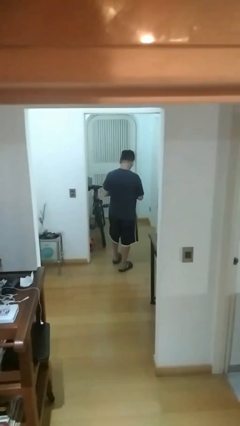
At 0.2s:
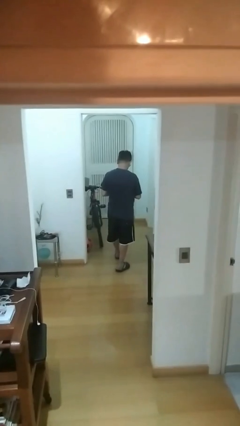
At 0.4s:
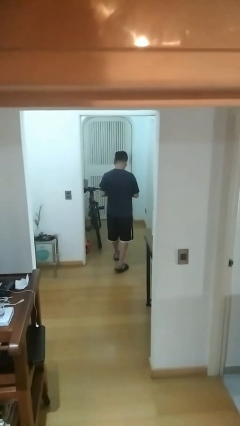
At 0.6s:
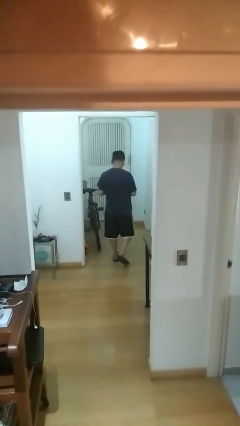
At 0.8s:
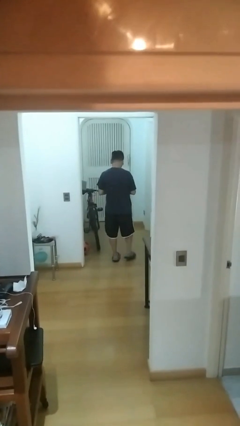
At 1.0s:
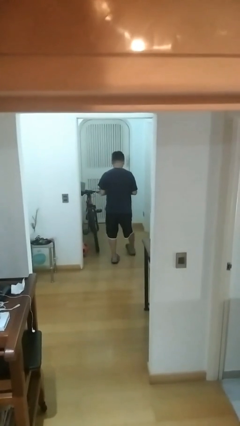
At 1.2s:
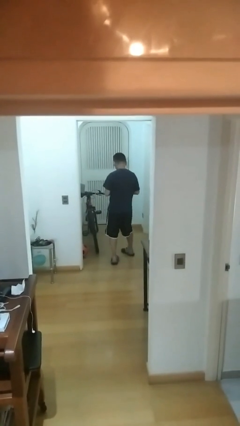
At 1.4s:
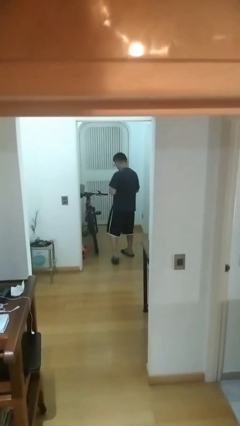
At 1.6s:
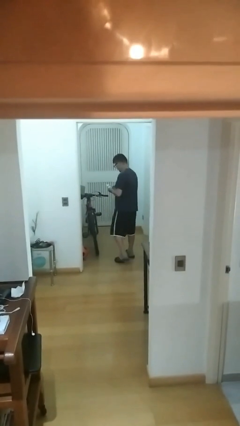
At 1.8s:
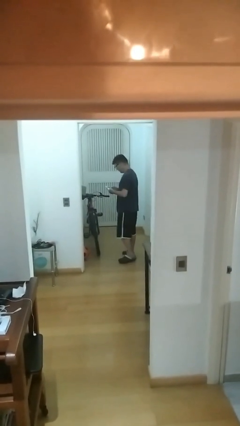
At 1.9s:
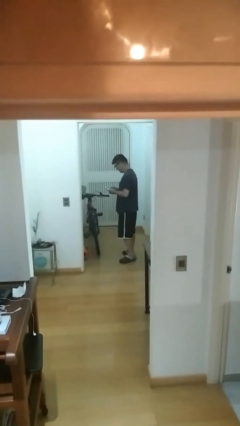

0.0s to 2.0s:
person exits scene through structure

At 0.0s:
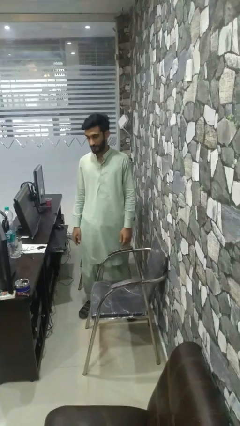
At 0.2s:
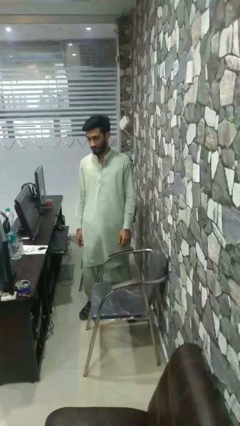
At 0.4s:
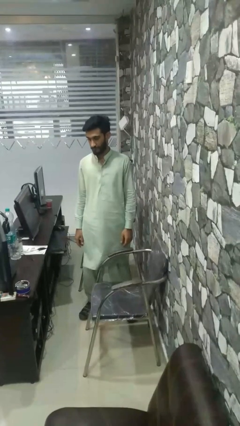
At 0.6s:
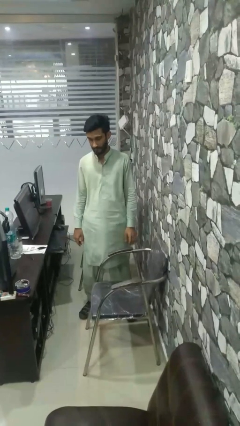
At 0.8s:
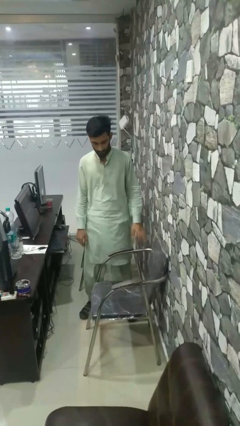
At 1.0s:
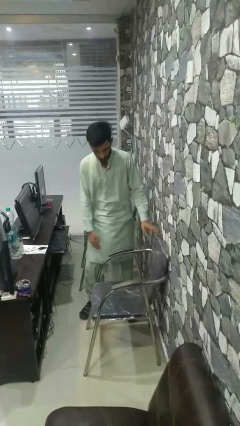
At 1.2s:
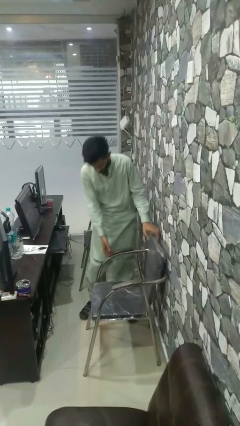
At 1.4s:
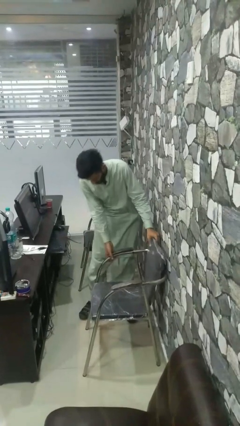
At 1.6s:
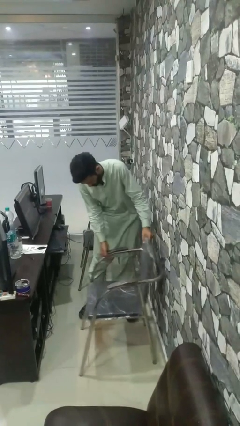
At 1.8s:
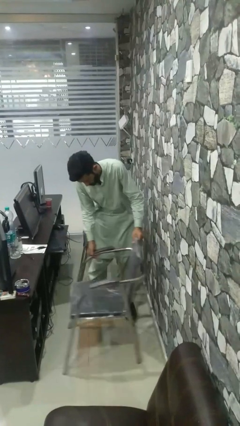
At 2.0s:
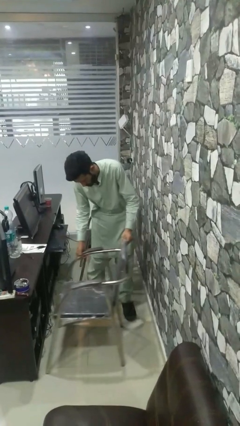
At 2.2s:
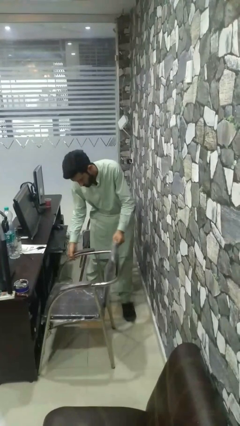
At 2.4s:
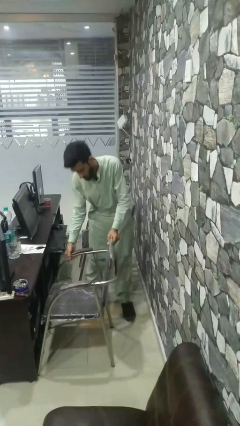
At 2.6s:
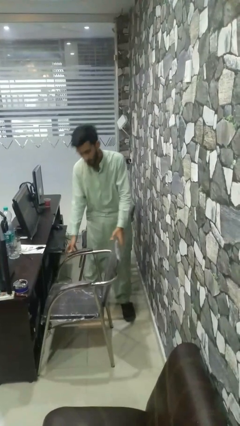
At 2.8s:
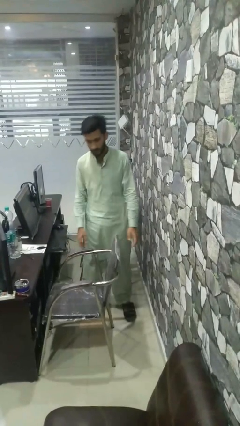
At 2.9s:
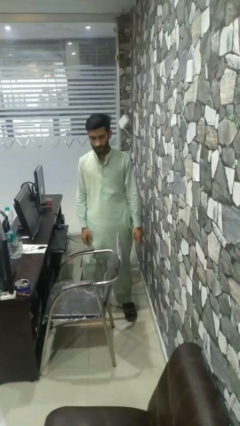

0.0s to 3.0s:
person pushes in chair

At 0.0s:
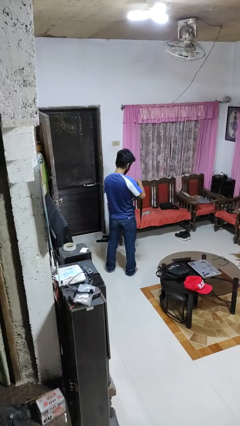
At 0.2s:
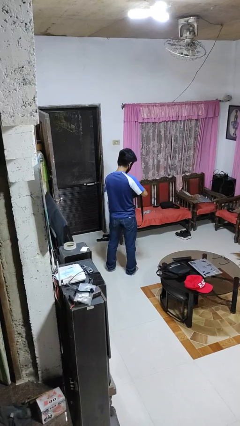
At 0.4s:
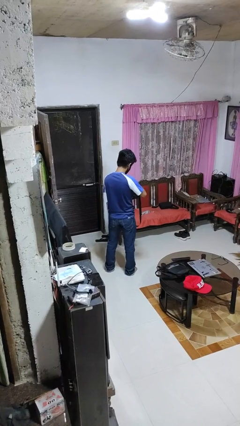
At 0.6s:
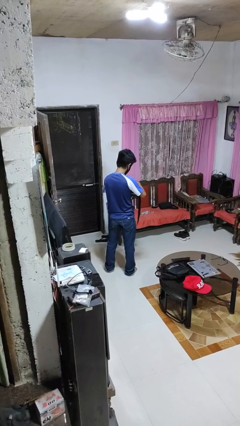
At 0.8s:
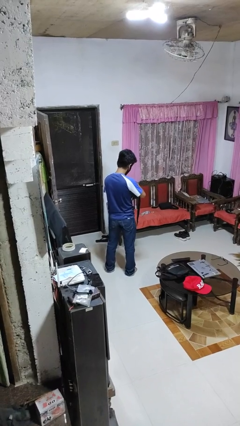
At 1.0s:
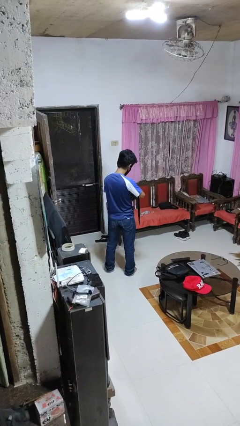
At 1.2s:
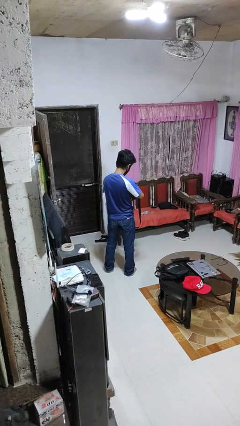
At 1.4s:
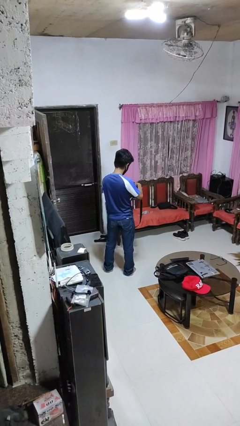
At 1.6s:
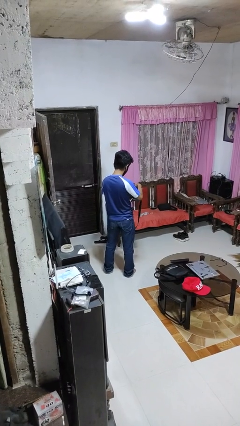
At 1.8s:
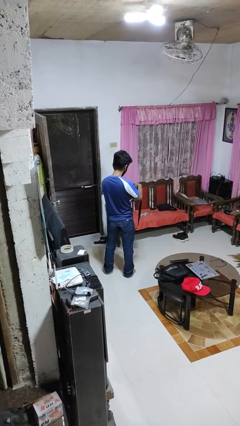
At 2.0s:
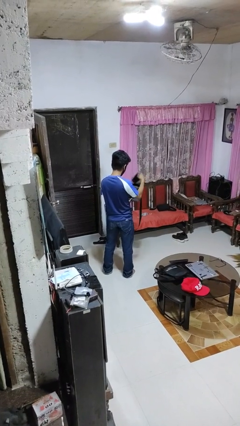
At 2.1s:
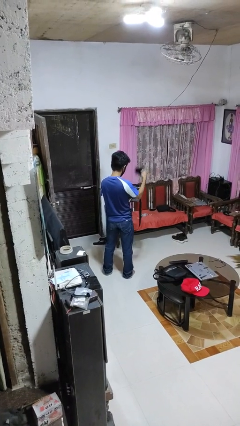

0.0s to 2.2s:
person searches in purse

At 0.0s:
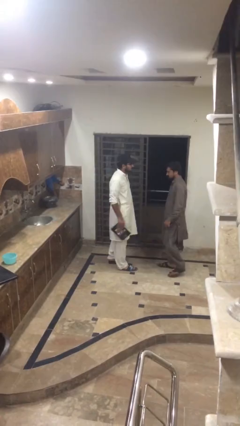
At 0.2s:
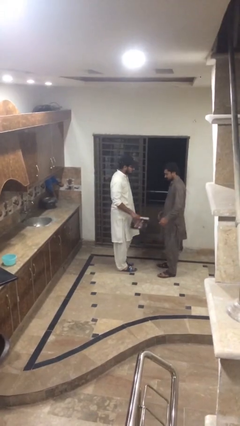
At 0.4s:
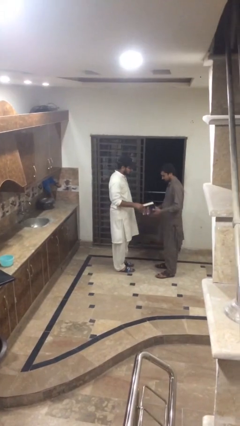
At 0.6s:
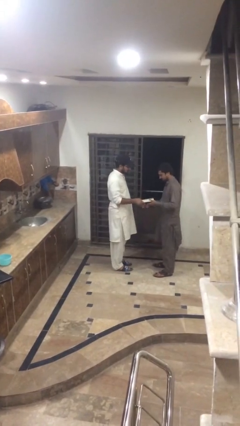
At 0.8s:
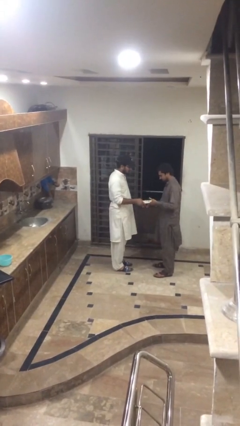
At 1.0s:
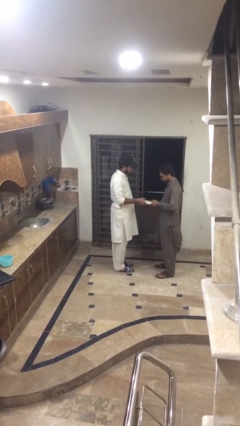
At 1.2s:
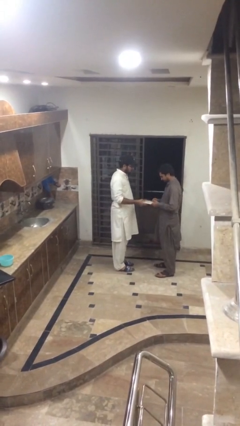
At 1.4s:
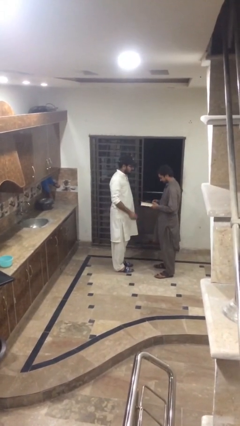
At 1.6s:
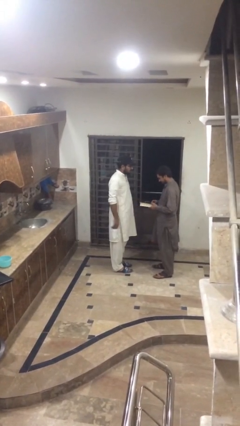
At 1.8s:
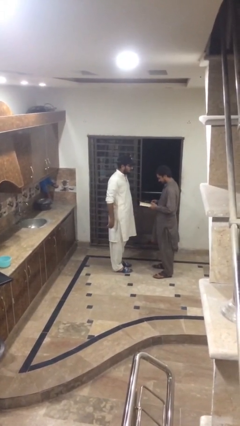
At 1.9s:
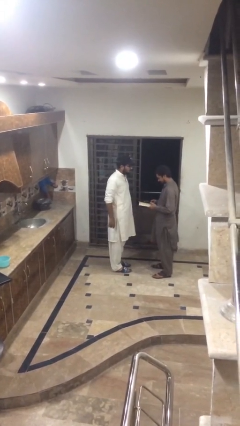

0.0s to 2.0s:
person transfers object to person

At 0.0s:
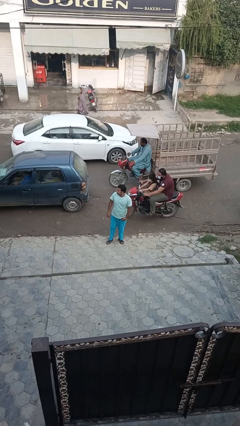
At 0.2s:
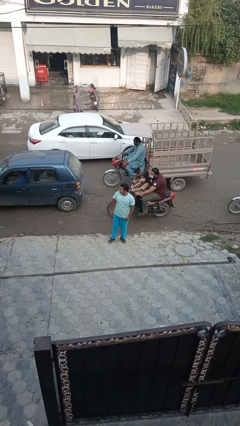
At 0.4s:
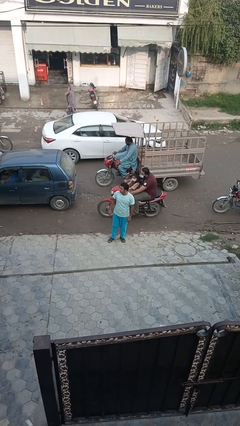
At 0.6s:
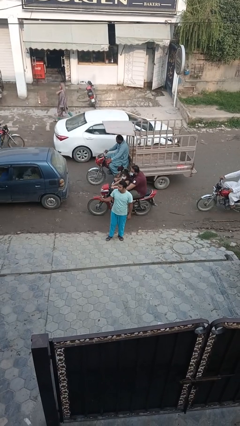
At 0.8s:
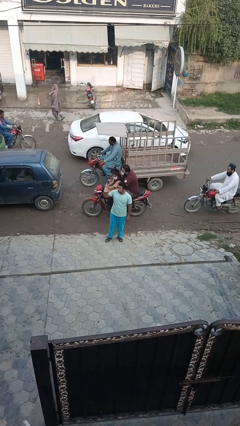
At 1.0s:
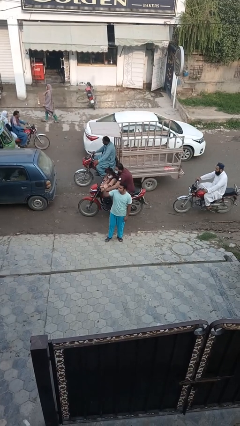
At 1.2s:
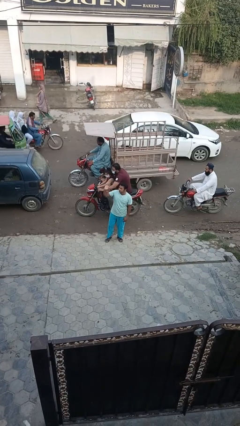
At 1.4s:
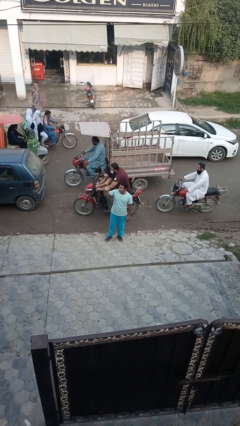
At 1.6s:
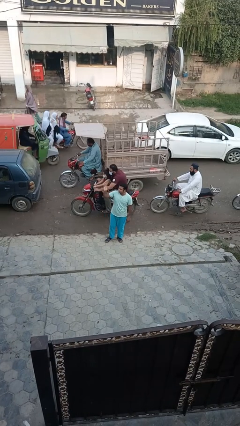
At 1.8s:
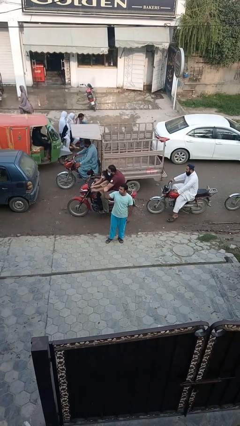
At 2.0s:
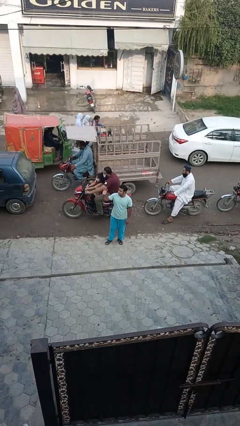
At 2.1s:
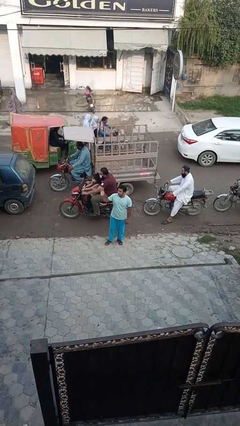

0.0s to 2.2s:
person waves at person

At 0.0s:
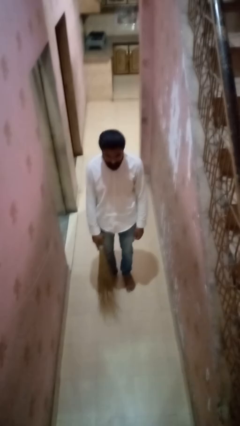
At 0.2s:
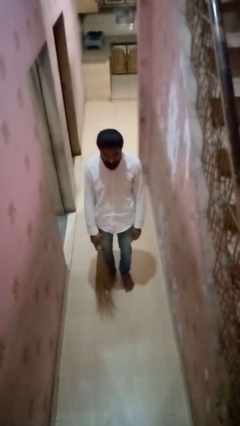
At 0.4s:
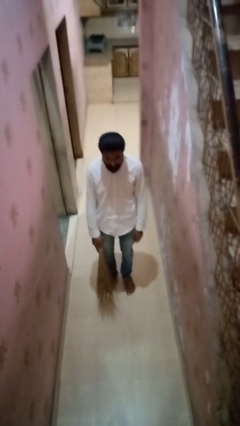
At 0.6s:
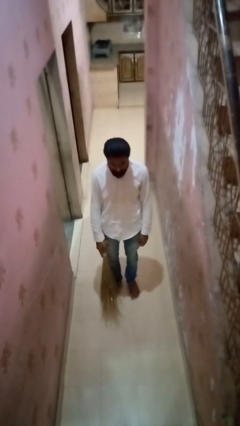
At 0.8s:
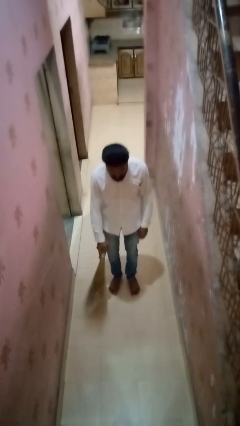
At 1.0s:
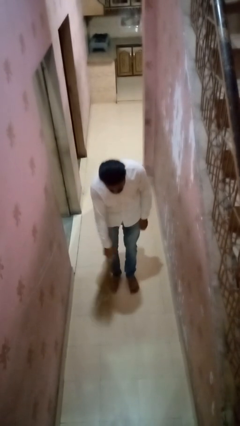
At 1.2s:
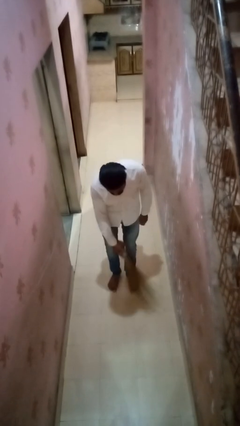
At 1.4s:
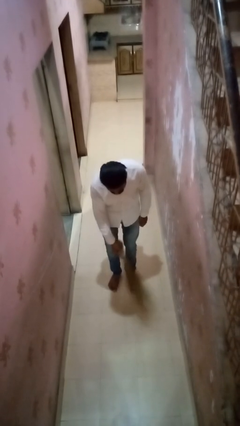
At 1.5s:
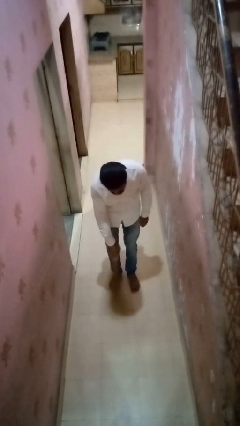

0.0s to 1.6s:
person sweeps floor

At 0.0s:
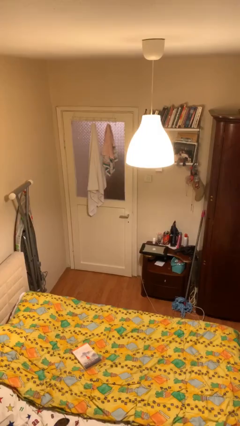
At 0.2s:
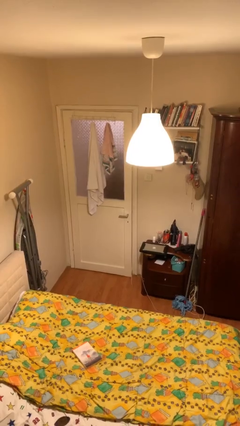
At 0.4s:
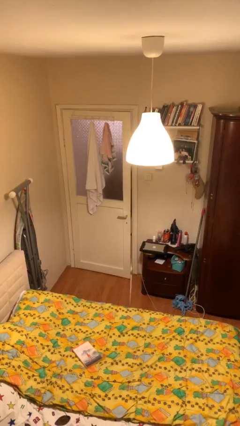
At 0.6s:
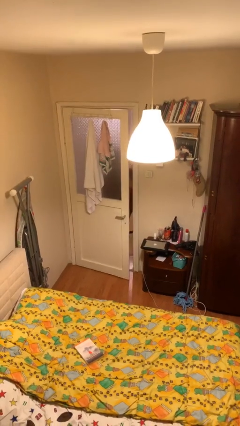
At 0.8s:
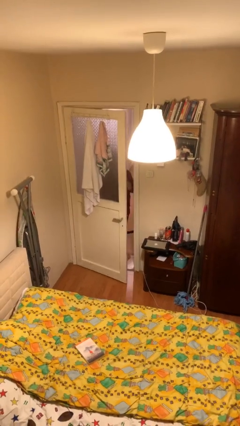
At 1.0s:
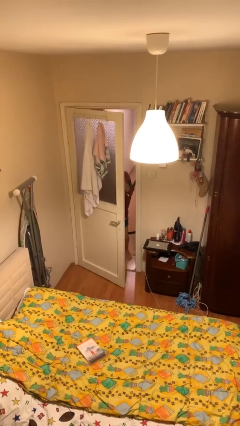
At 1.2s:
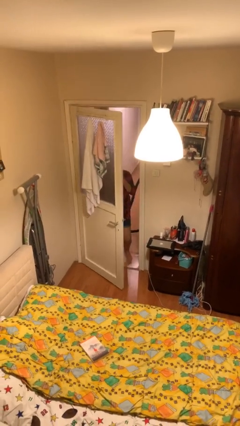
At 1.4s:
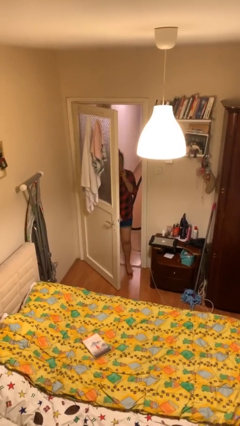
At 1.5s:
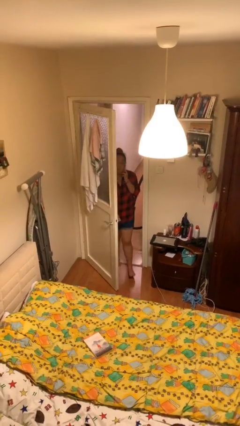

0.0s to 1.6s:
person opens facility door

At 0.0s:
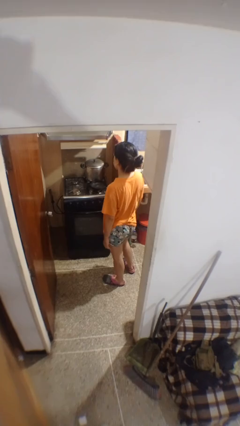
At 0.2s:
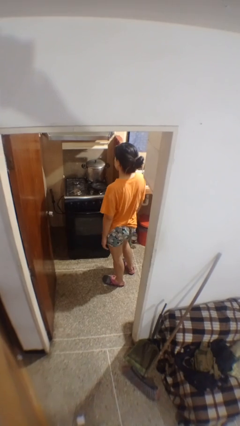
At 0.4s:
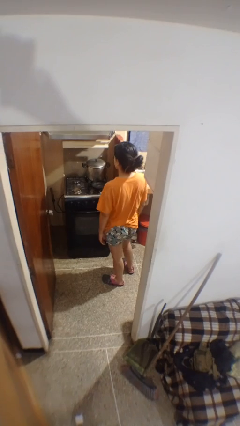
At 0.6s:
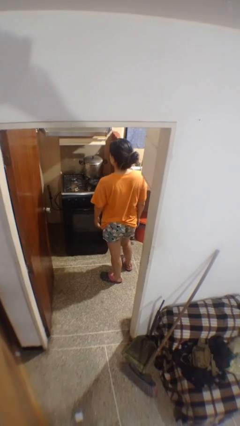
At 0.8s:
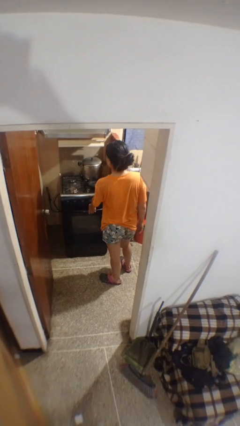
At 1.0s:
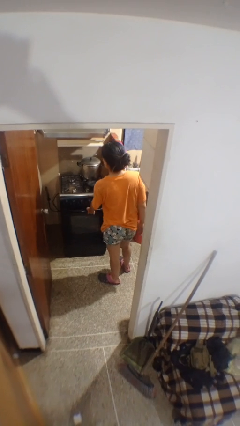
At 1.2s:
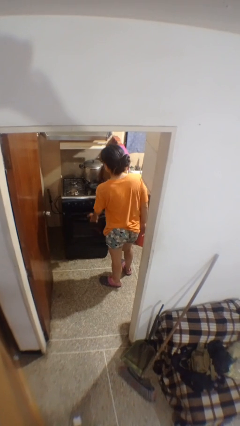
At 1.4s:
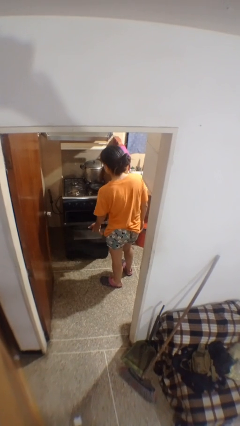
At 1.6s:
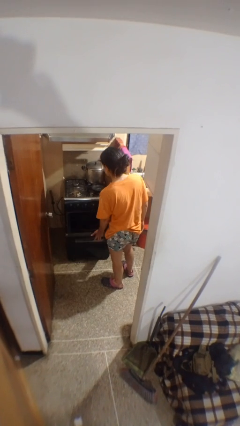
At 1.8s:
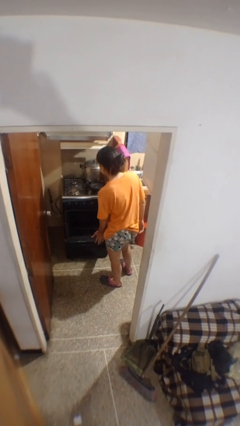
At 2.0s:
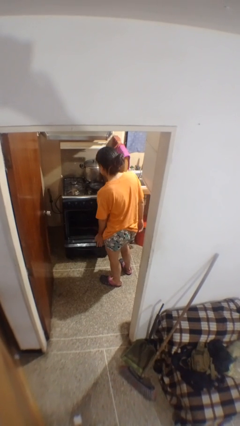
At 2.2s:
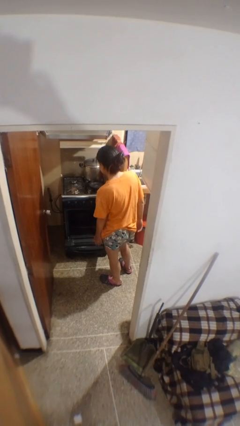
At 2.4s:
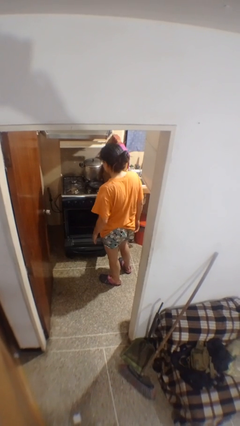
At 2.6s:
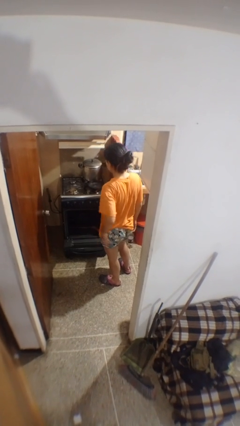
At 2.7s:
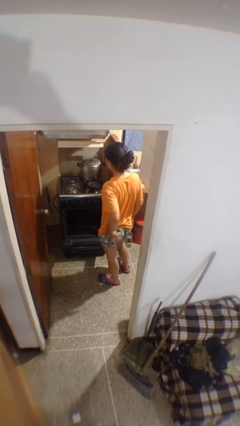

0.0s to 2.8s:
person opens oven door
